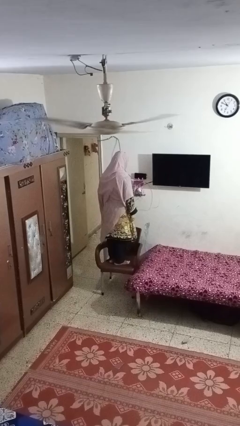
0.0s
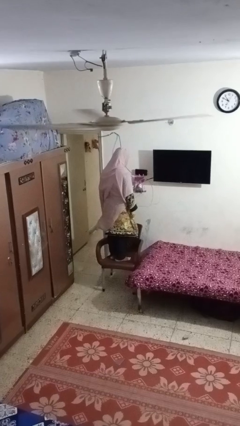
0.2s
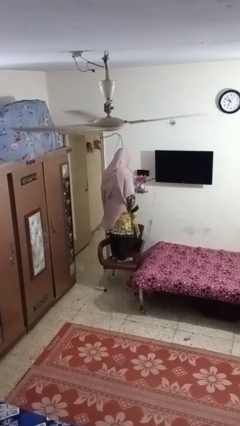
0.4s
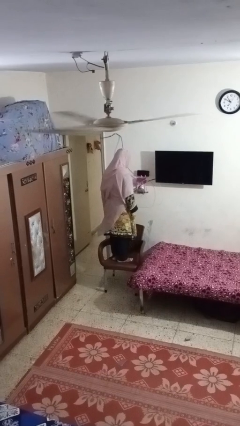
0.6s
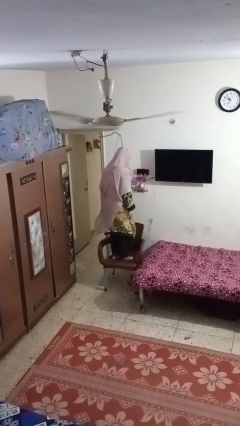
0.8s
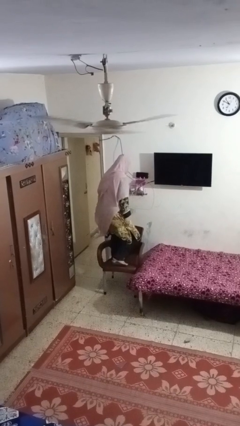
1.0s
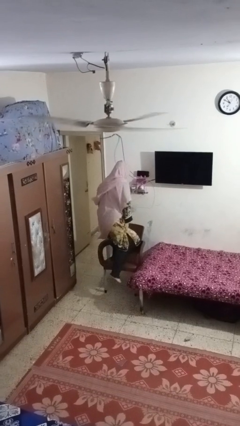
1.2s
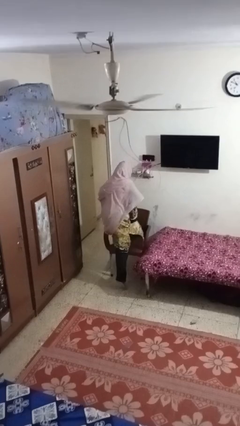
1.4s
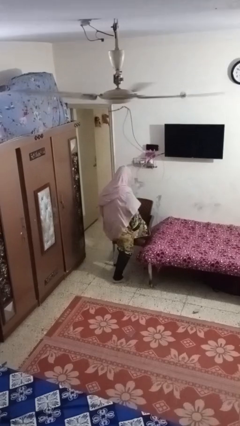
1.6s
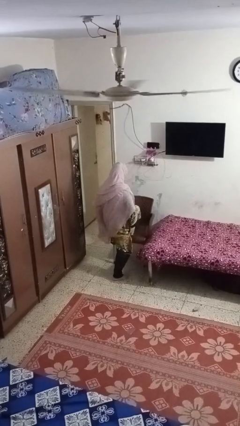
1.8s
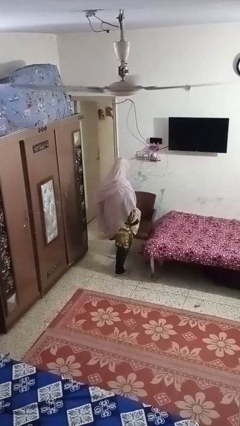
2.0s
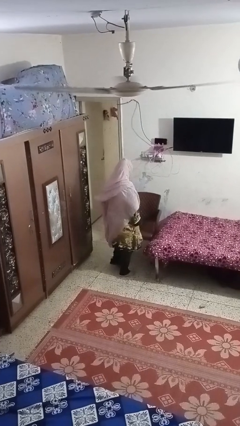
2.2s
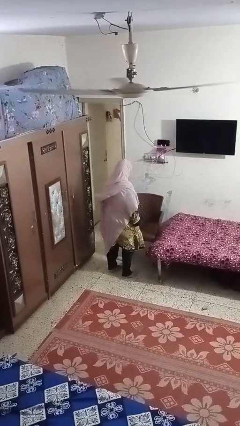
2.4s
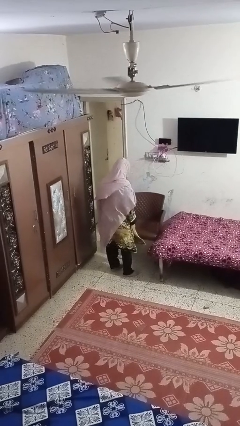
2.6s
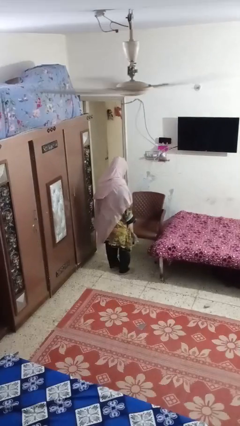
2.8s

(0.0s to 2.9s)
person climbs off chair

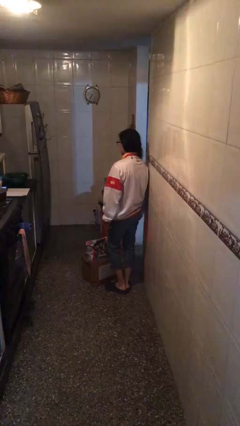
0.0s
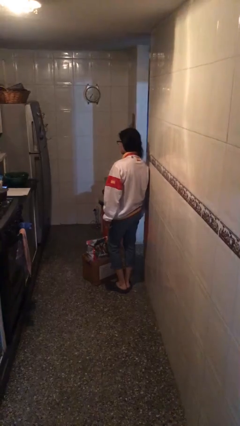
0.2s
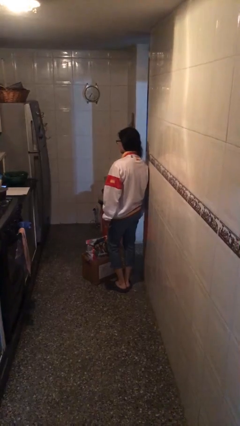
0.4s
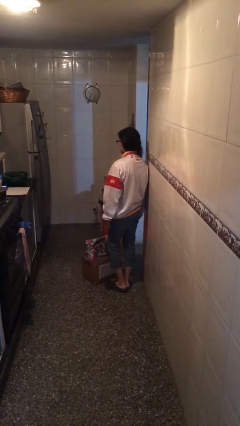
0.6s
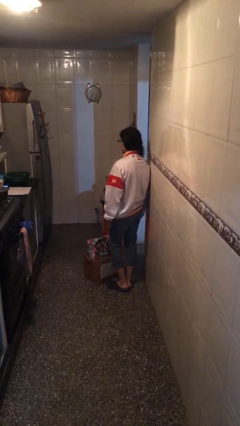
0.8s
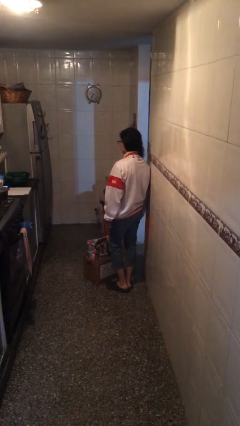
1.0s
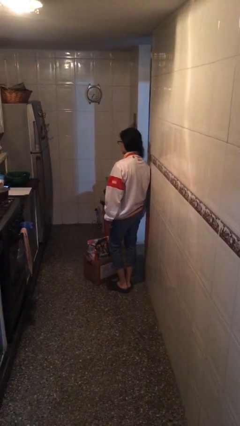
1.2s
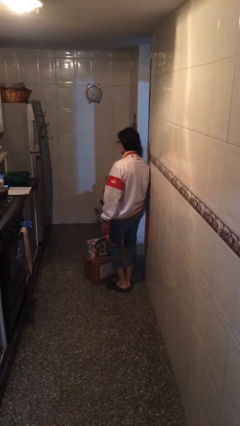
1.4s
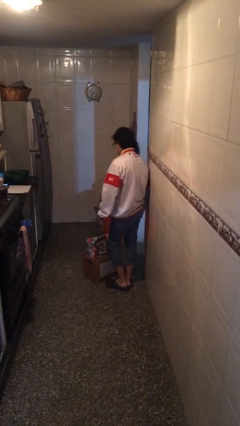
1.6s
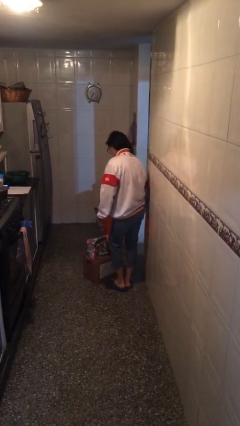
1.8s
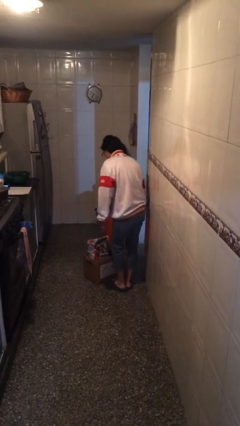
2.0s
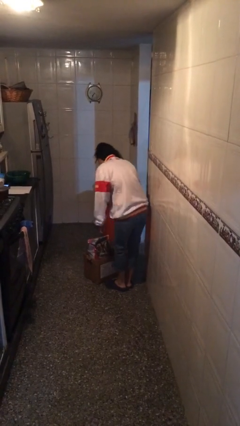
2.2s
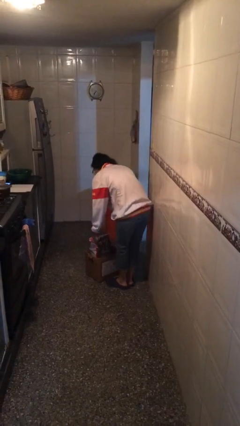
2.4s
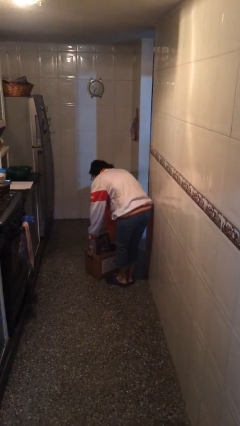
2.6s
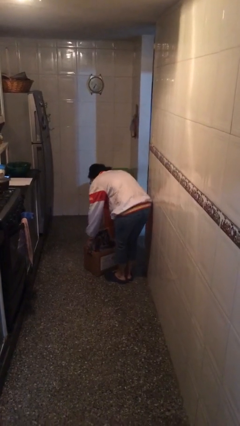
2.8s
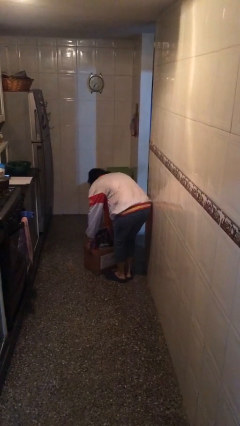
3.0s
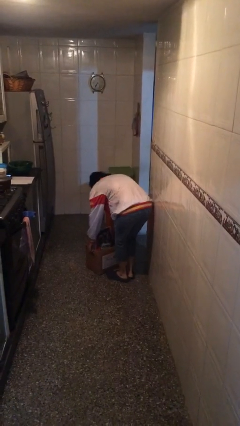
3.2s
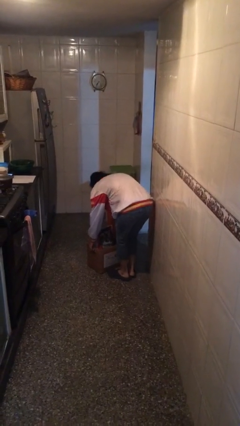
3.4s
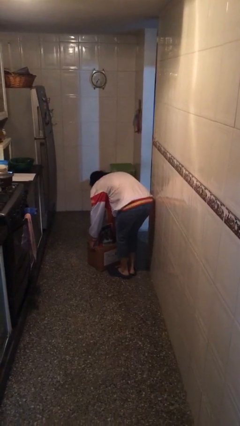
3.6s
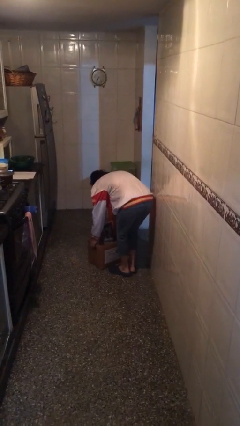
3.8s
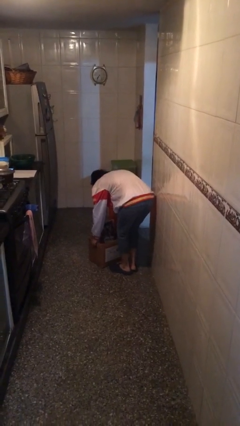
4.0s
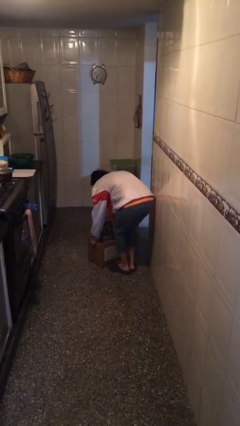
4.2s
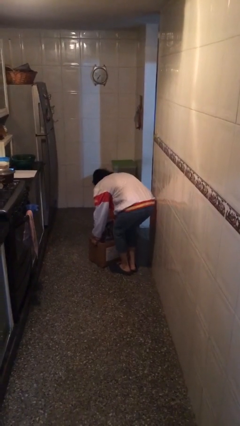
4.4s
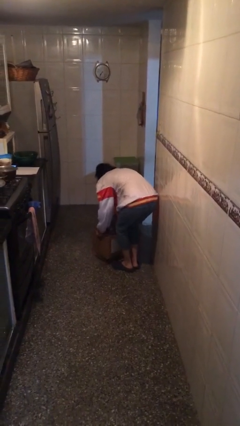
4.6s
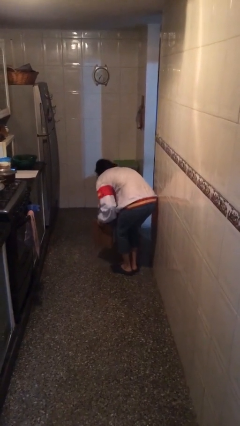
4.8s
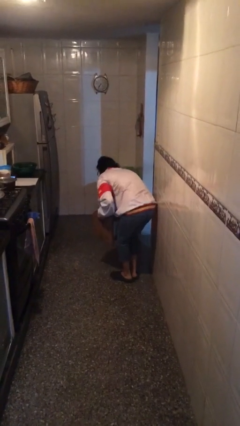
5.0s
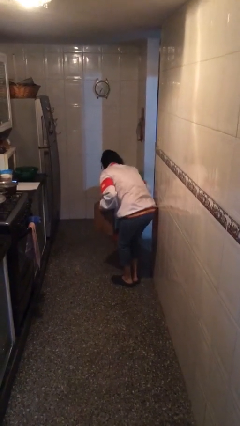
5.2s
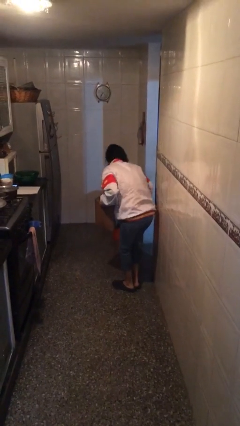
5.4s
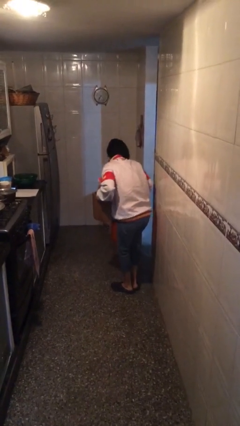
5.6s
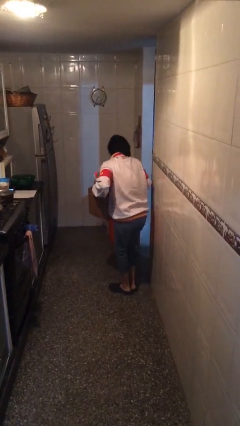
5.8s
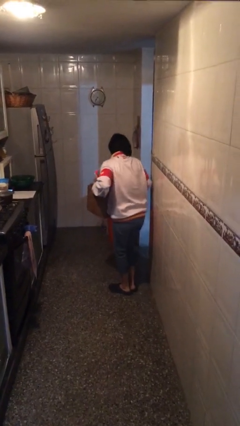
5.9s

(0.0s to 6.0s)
person picks up object from floor

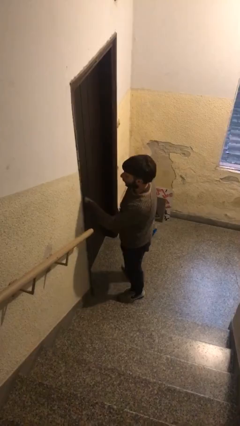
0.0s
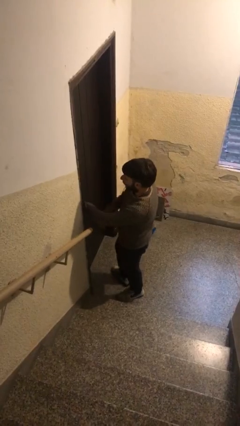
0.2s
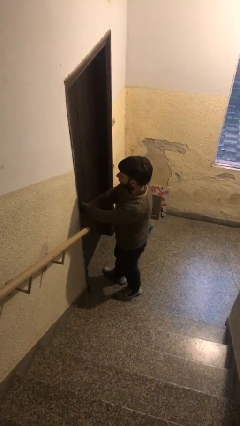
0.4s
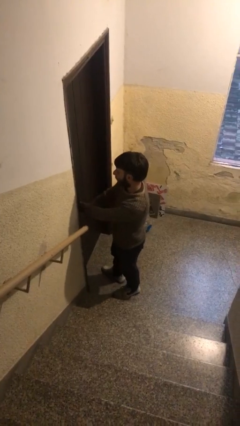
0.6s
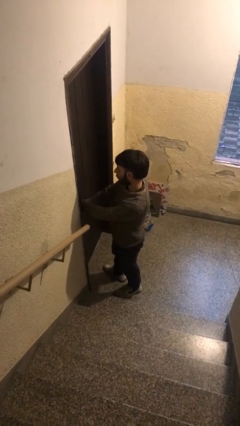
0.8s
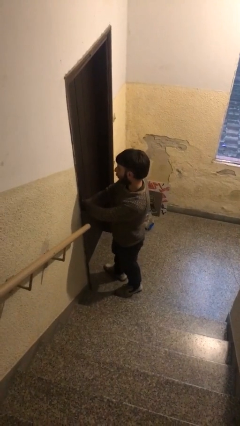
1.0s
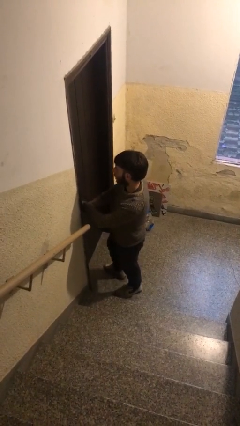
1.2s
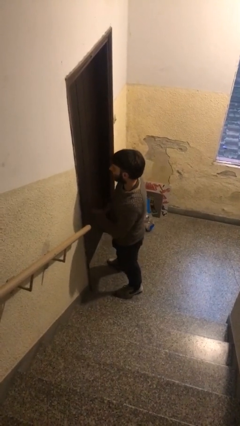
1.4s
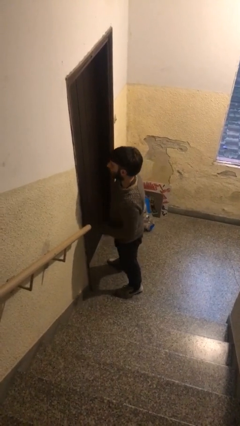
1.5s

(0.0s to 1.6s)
person locks door with keys

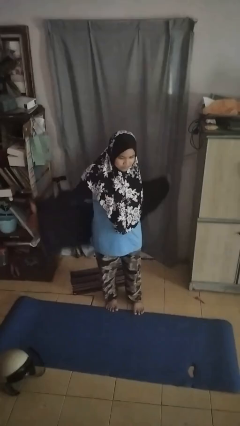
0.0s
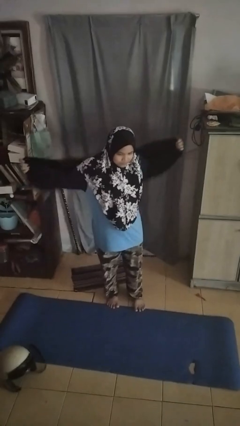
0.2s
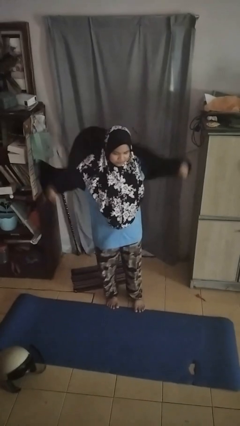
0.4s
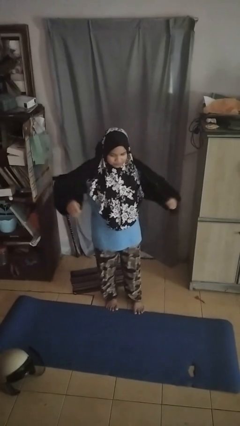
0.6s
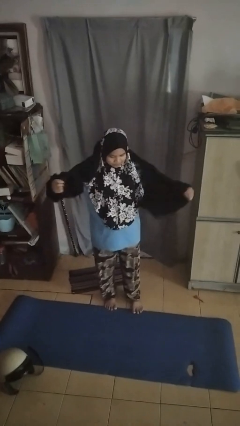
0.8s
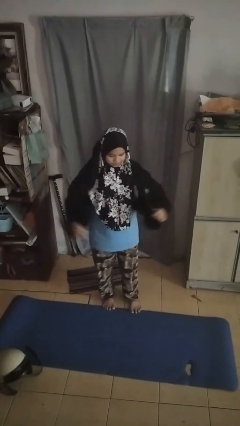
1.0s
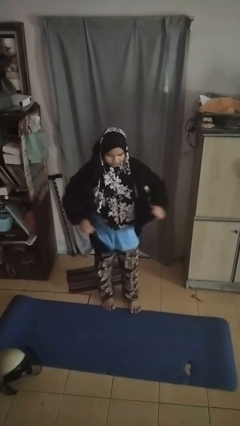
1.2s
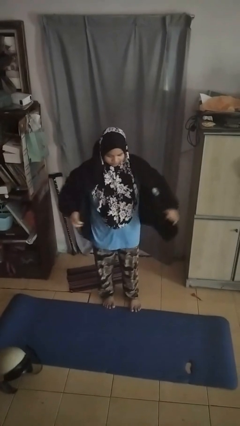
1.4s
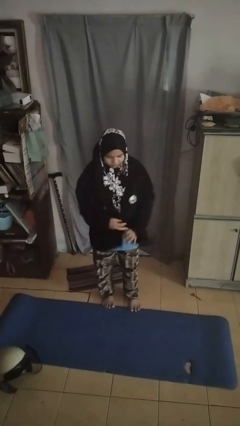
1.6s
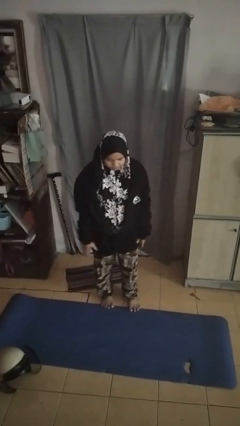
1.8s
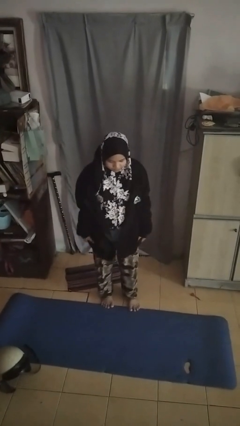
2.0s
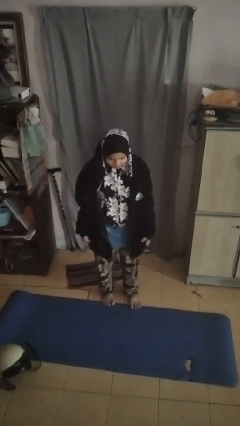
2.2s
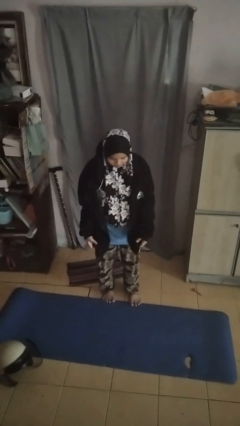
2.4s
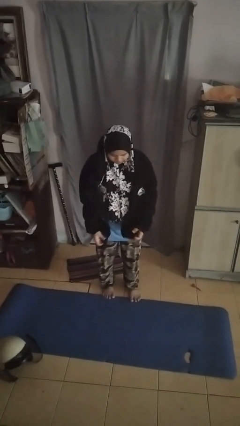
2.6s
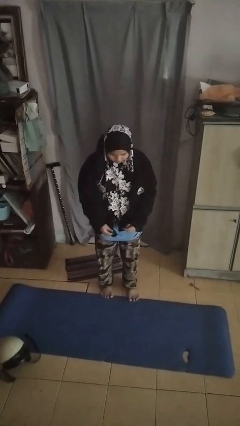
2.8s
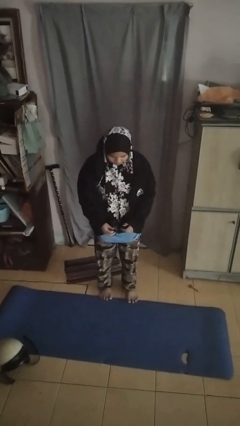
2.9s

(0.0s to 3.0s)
person puts on jacket

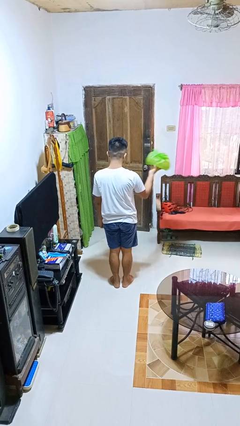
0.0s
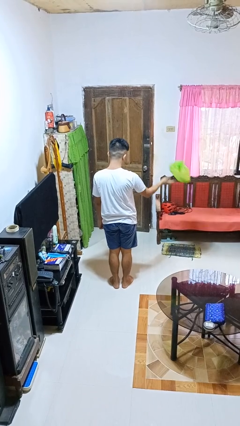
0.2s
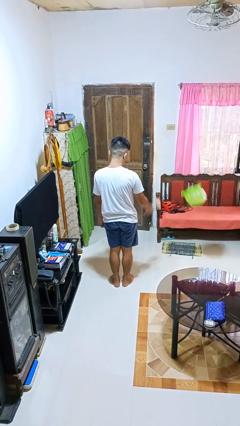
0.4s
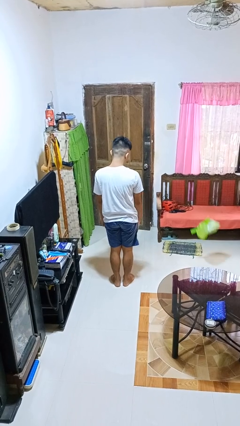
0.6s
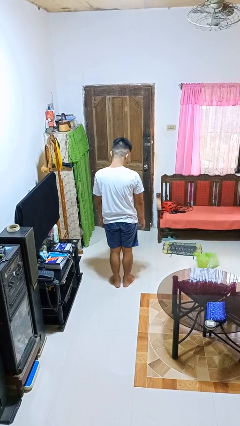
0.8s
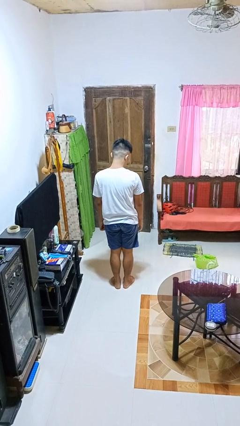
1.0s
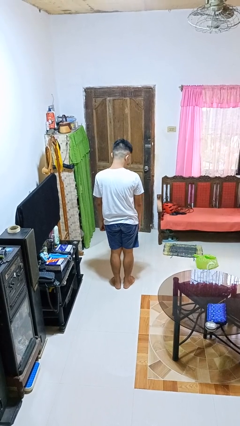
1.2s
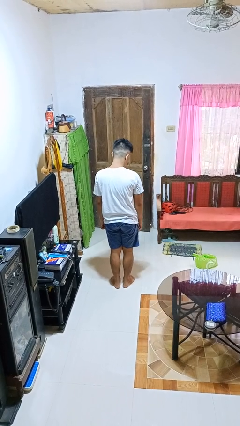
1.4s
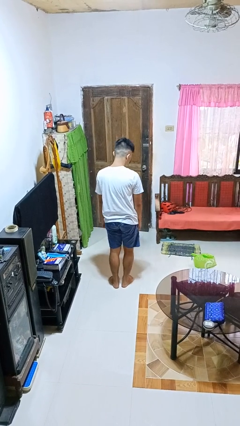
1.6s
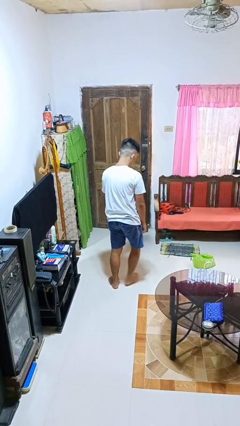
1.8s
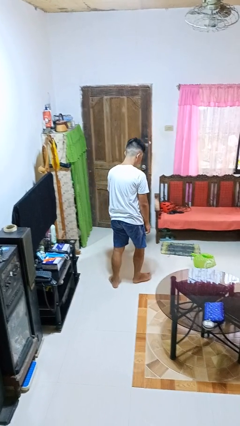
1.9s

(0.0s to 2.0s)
person throws object to ground

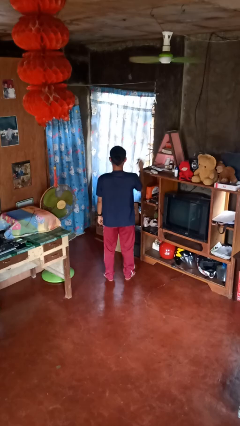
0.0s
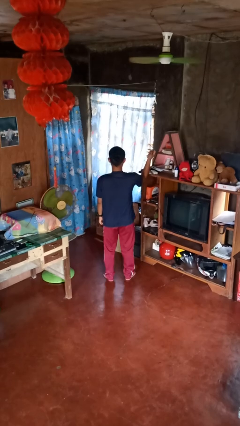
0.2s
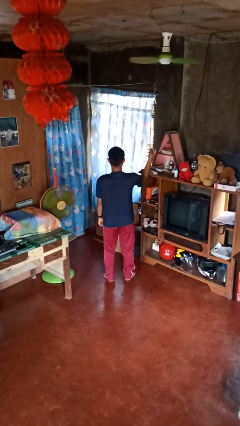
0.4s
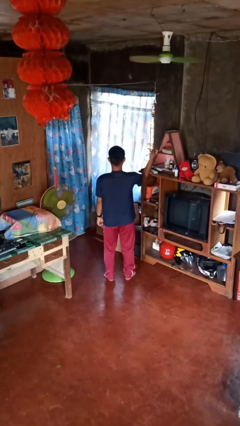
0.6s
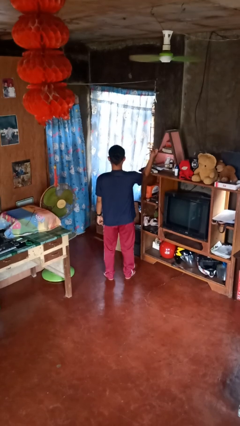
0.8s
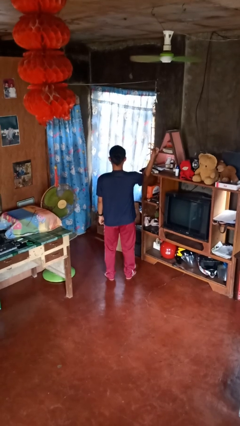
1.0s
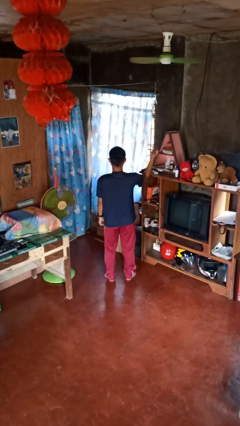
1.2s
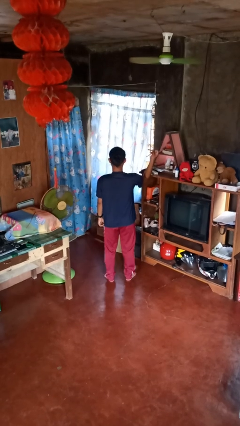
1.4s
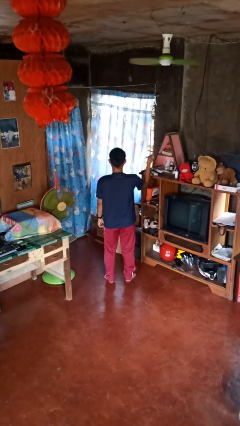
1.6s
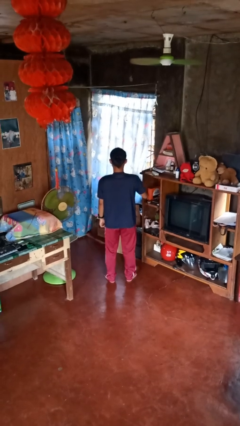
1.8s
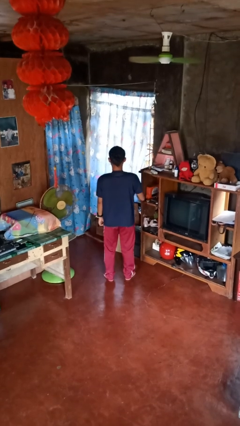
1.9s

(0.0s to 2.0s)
person snaps fingers

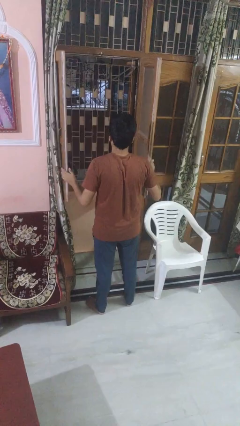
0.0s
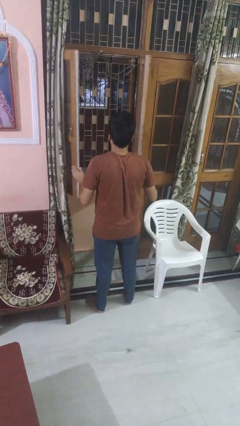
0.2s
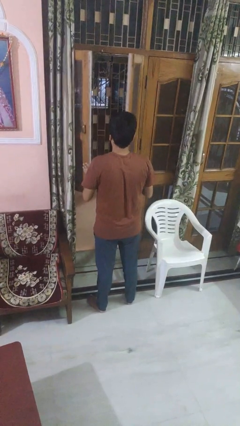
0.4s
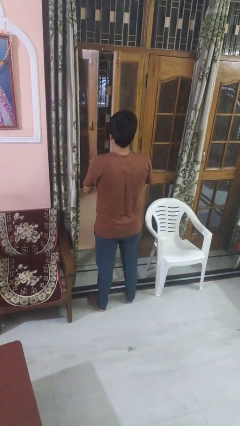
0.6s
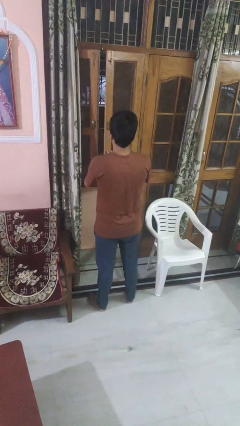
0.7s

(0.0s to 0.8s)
person closes home window
